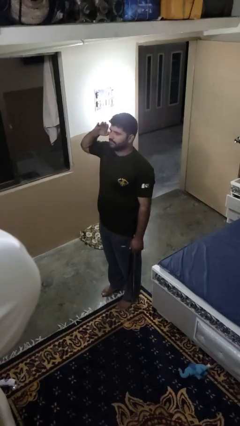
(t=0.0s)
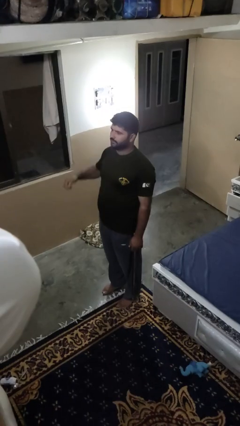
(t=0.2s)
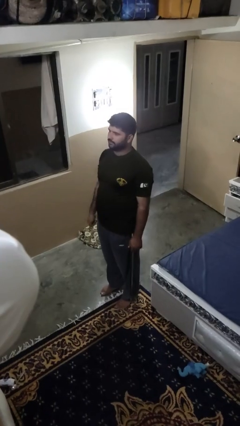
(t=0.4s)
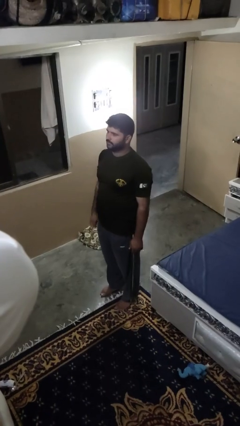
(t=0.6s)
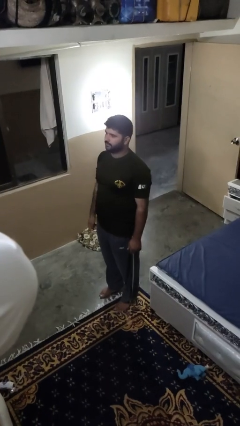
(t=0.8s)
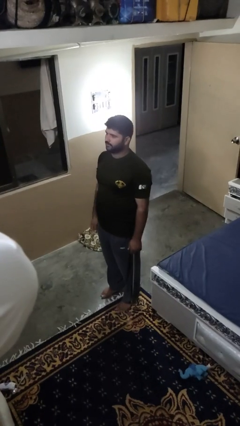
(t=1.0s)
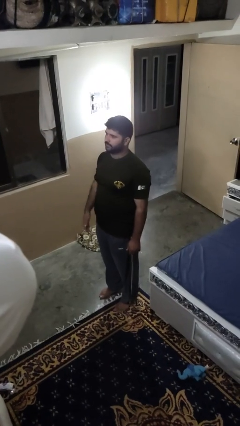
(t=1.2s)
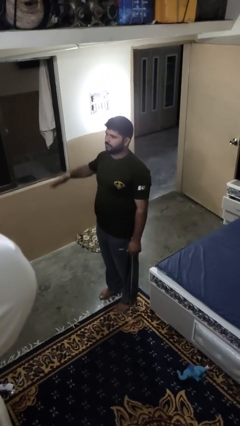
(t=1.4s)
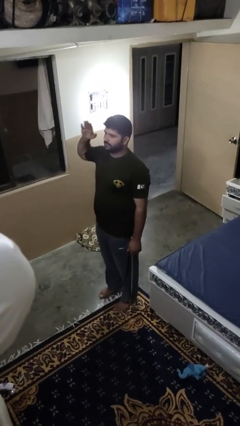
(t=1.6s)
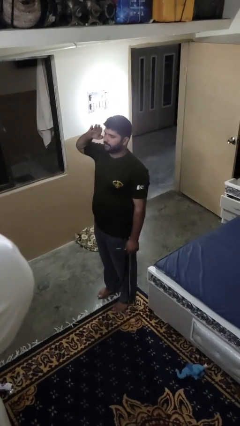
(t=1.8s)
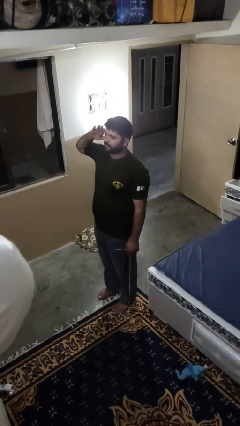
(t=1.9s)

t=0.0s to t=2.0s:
person salutes

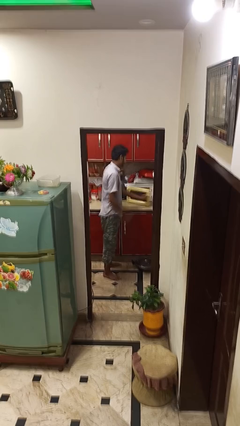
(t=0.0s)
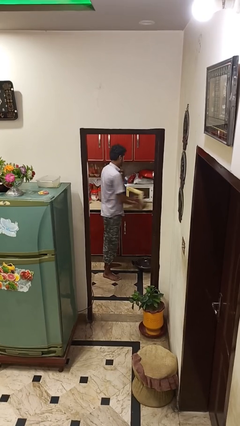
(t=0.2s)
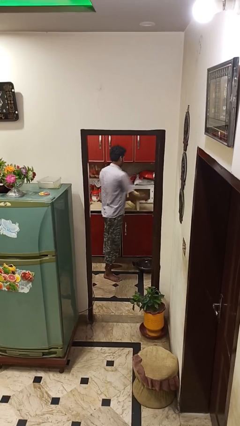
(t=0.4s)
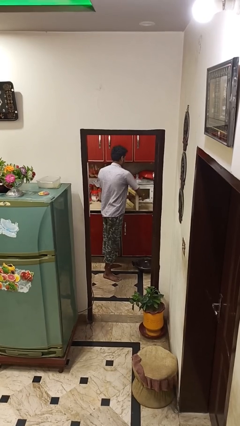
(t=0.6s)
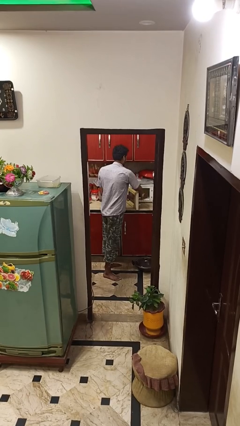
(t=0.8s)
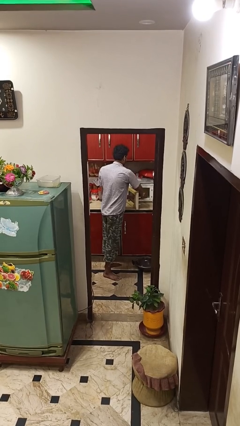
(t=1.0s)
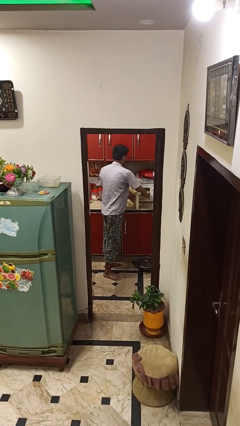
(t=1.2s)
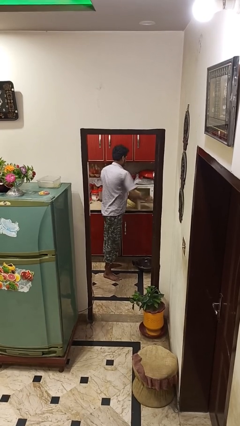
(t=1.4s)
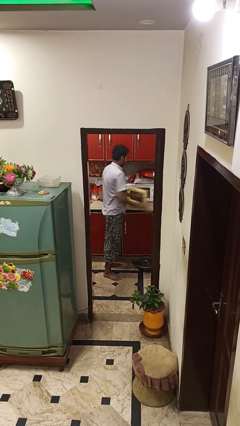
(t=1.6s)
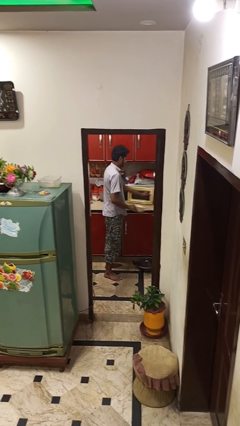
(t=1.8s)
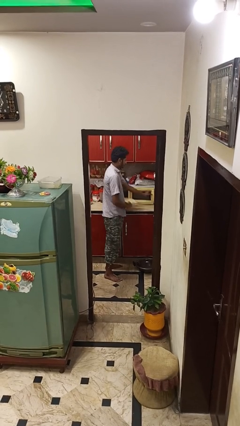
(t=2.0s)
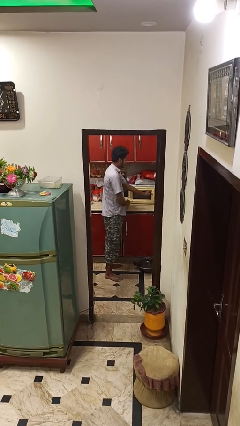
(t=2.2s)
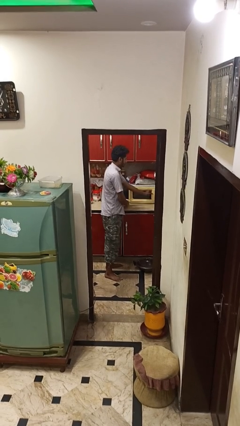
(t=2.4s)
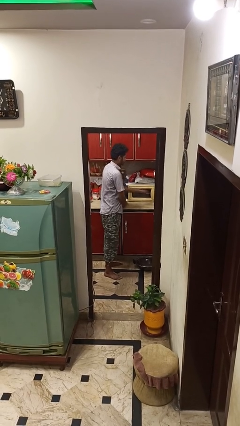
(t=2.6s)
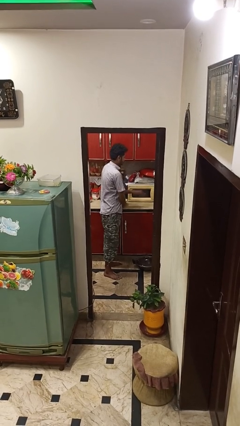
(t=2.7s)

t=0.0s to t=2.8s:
person takes object from microwave

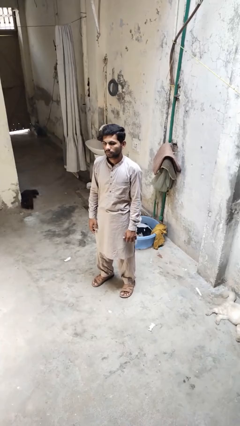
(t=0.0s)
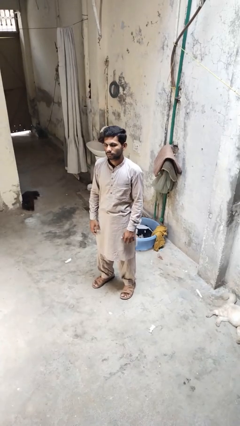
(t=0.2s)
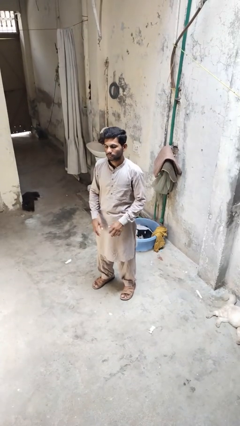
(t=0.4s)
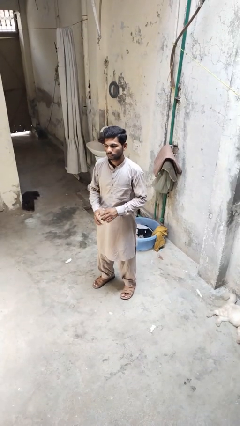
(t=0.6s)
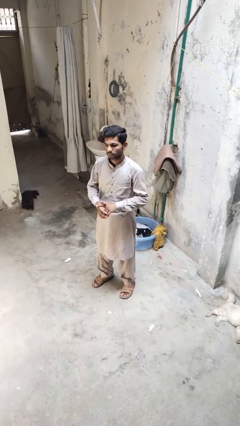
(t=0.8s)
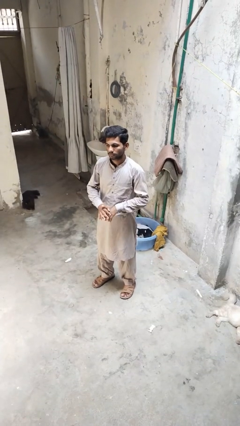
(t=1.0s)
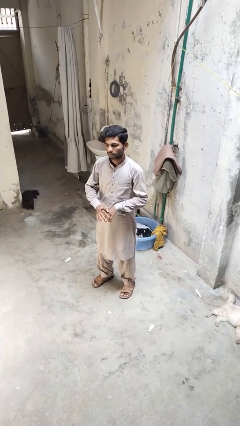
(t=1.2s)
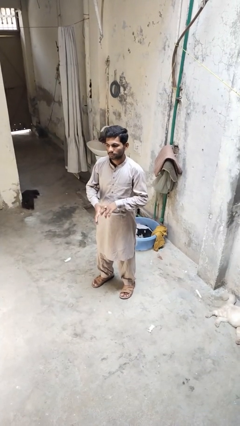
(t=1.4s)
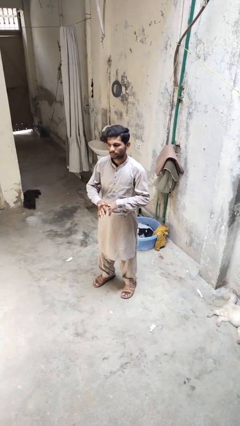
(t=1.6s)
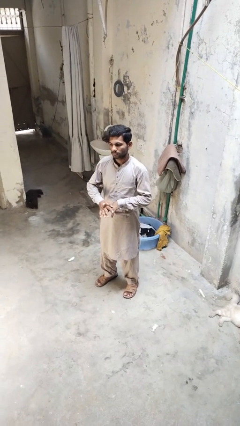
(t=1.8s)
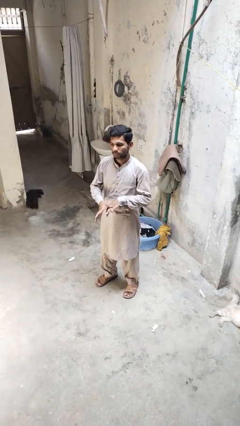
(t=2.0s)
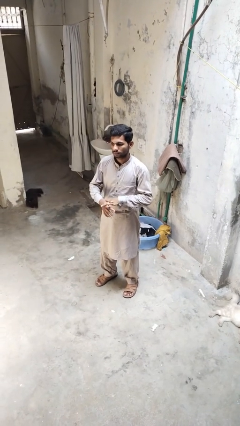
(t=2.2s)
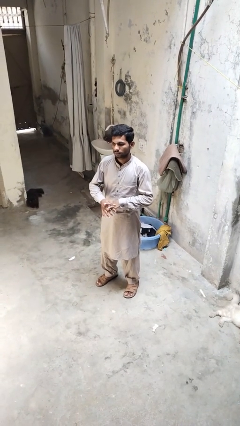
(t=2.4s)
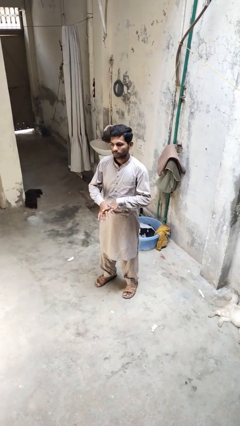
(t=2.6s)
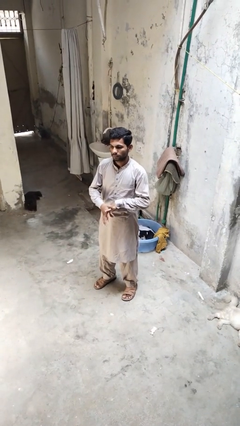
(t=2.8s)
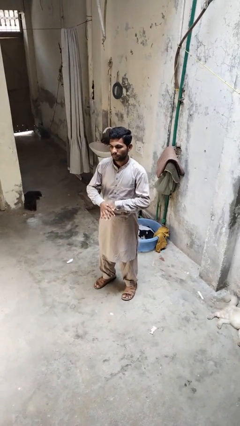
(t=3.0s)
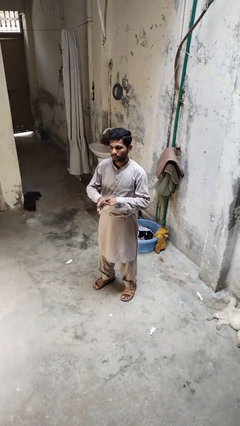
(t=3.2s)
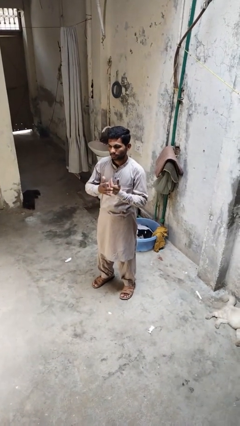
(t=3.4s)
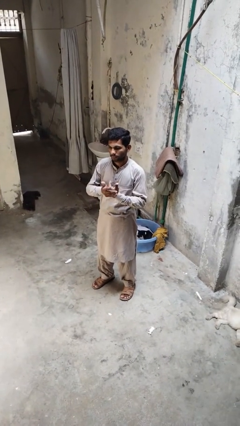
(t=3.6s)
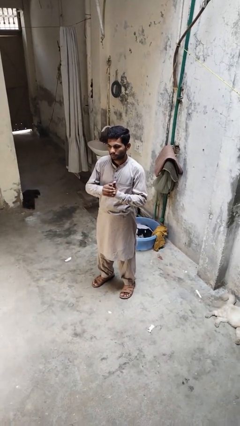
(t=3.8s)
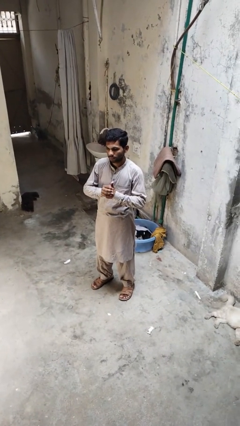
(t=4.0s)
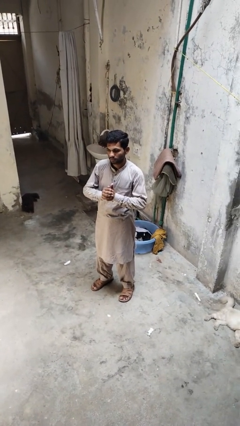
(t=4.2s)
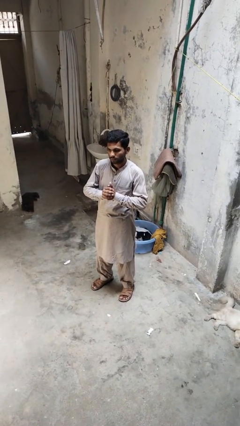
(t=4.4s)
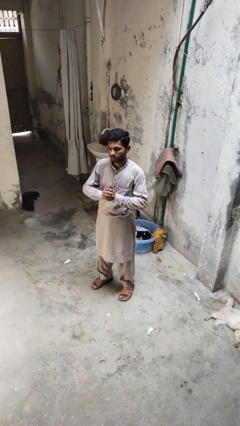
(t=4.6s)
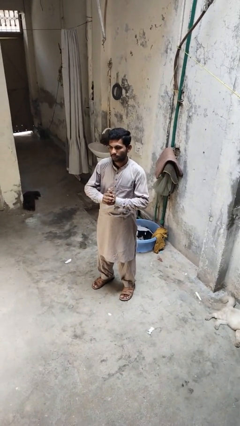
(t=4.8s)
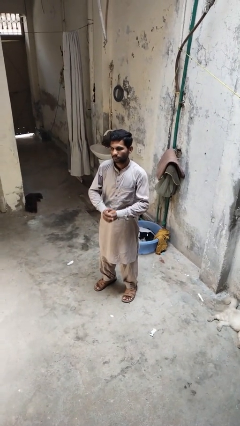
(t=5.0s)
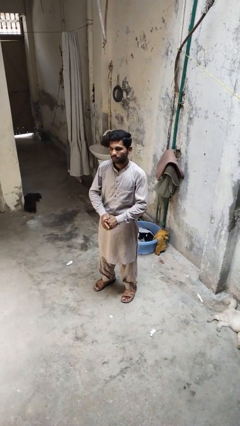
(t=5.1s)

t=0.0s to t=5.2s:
person cracks knuckles

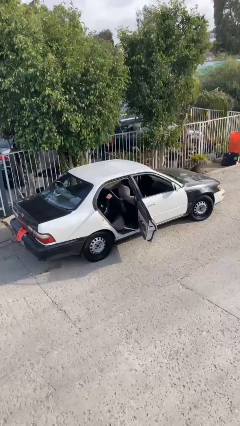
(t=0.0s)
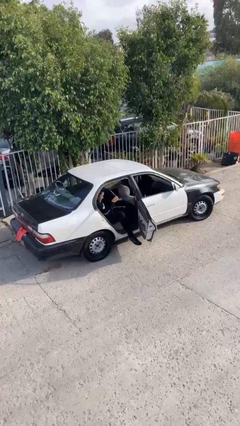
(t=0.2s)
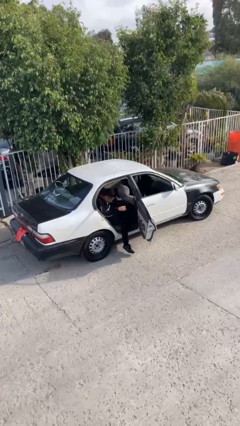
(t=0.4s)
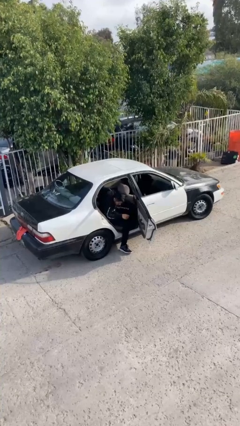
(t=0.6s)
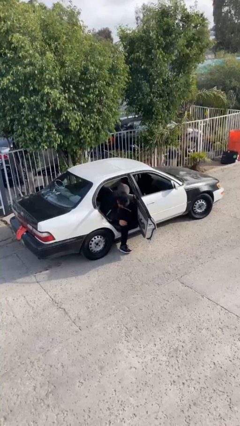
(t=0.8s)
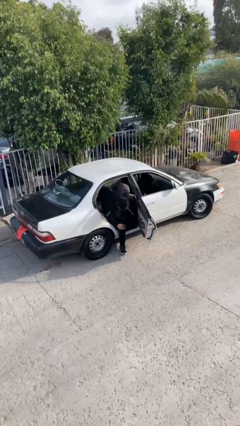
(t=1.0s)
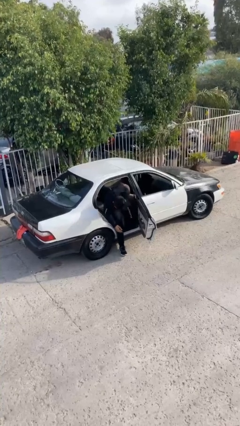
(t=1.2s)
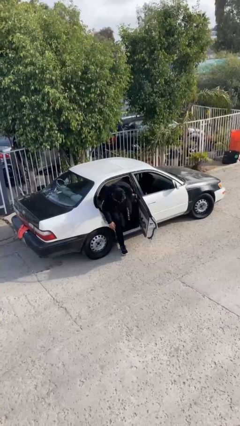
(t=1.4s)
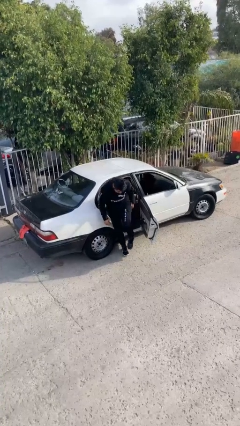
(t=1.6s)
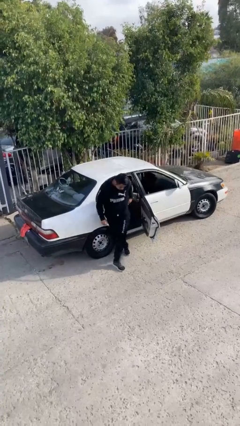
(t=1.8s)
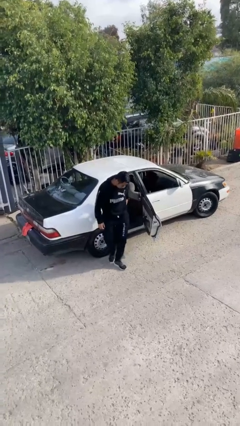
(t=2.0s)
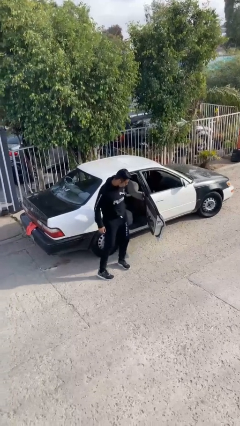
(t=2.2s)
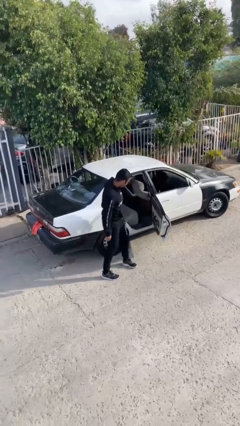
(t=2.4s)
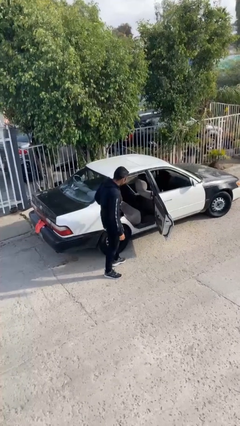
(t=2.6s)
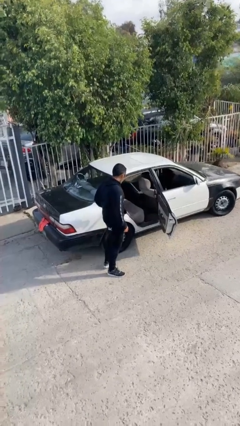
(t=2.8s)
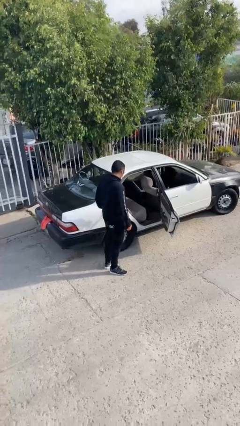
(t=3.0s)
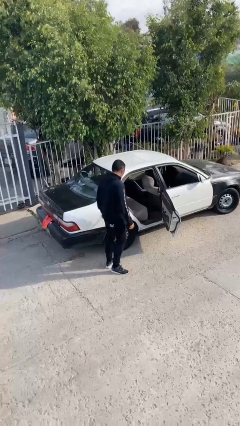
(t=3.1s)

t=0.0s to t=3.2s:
person exits car

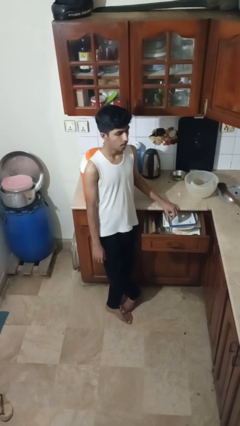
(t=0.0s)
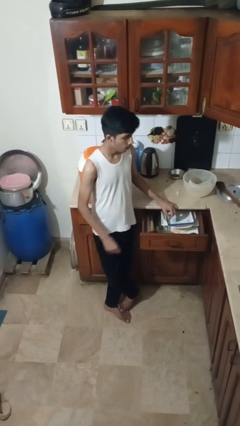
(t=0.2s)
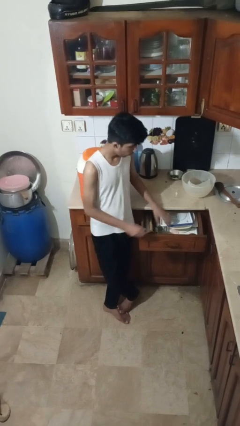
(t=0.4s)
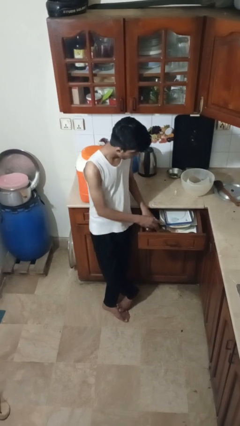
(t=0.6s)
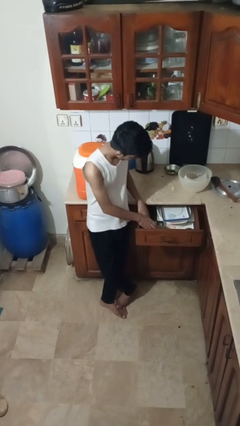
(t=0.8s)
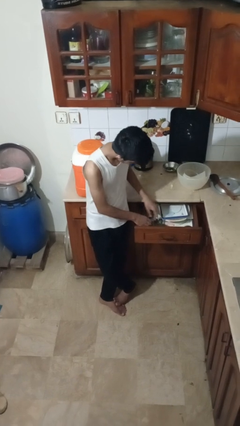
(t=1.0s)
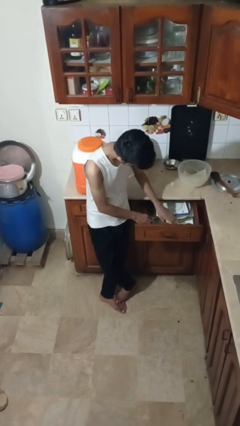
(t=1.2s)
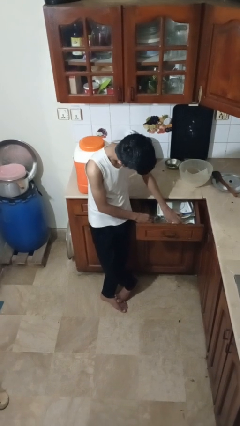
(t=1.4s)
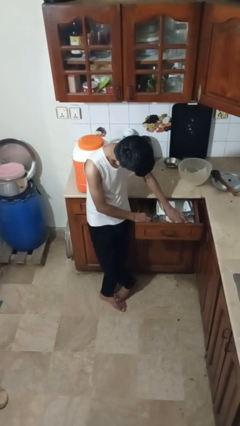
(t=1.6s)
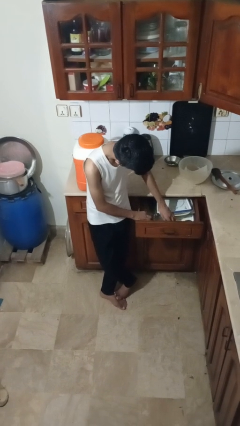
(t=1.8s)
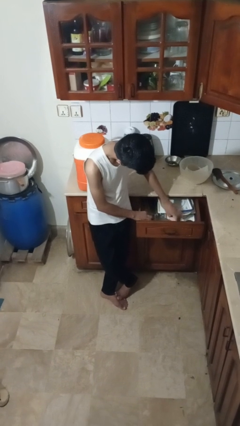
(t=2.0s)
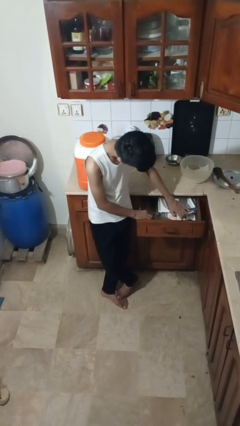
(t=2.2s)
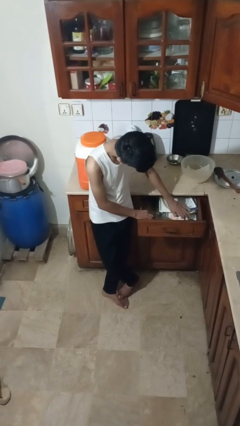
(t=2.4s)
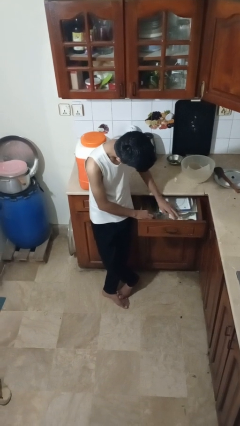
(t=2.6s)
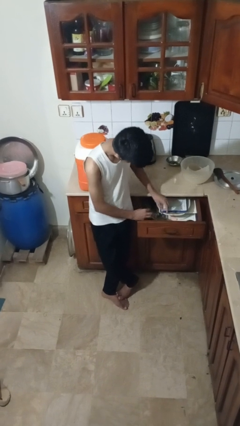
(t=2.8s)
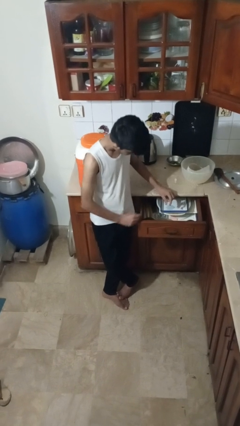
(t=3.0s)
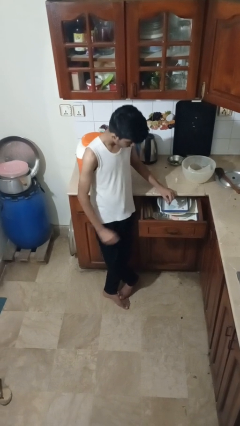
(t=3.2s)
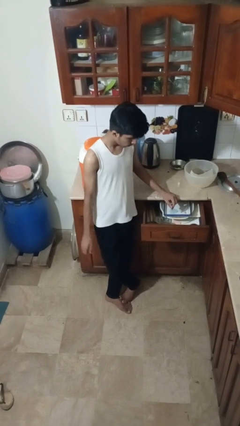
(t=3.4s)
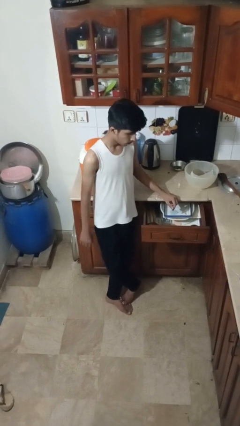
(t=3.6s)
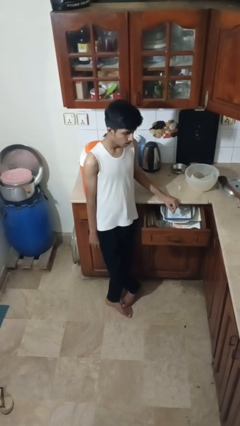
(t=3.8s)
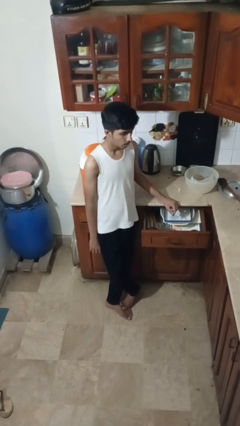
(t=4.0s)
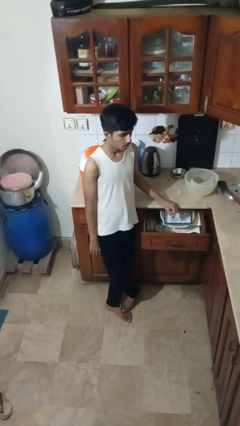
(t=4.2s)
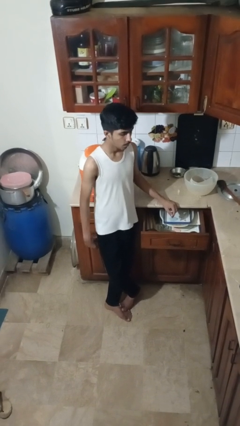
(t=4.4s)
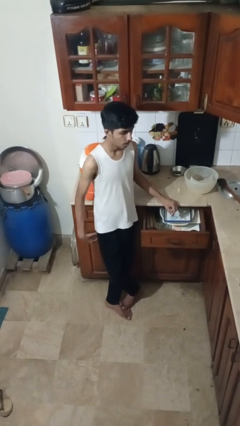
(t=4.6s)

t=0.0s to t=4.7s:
person searches in kitchen drawer
